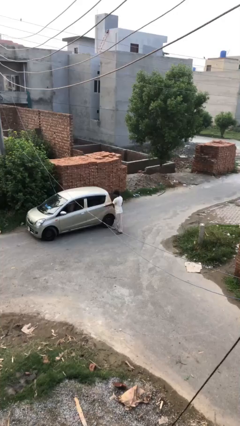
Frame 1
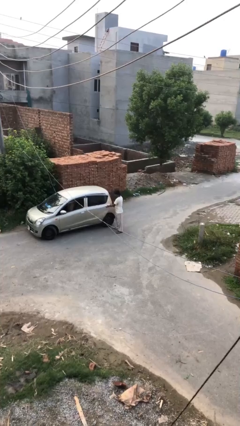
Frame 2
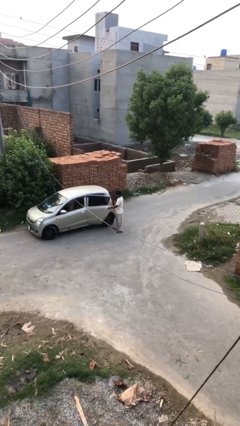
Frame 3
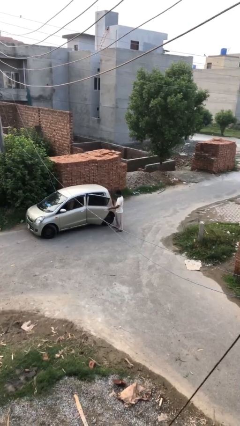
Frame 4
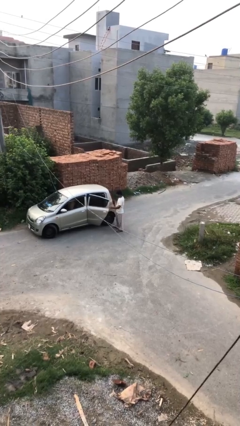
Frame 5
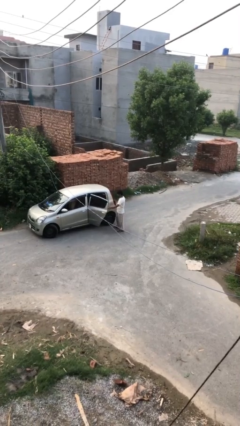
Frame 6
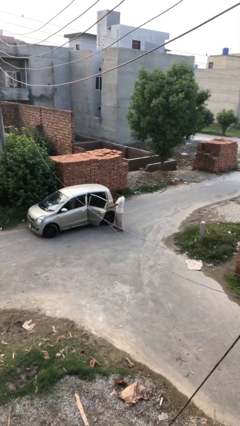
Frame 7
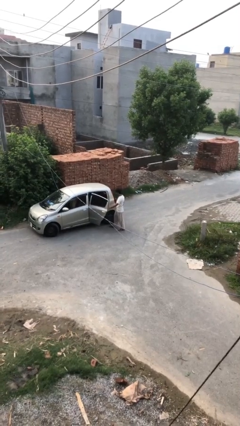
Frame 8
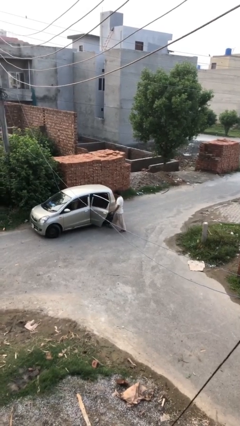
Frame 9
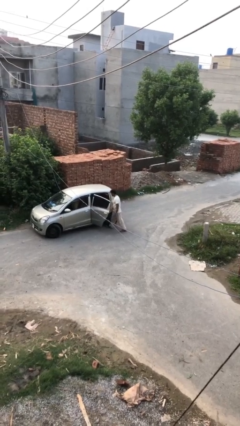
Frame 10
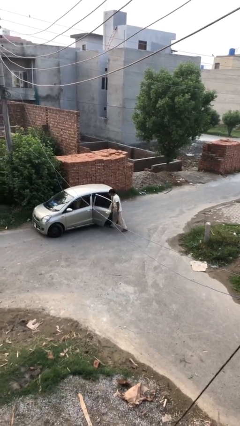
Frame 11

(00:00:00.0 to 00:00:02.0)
person opens car door

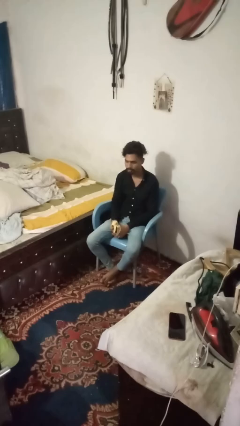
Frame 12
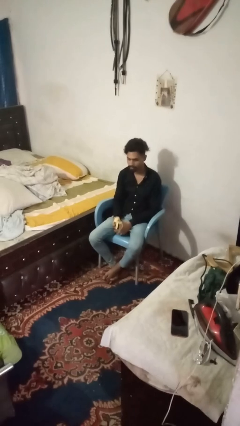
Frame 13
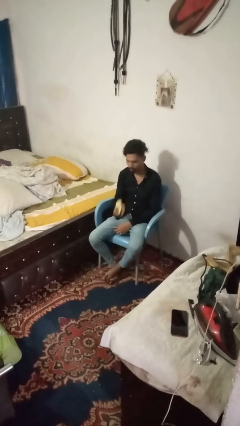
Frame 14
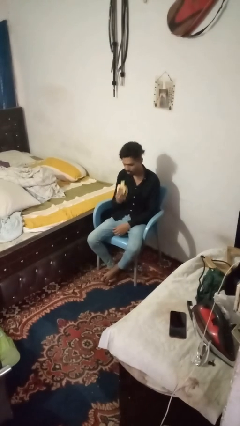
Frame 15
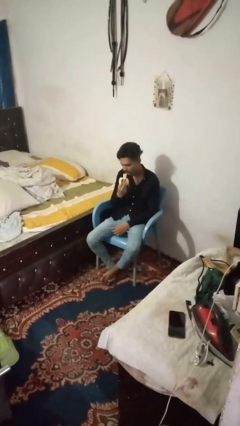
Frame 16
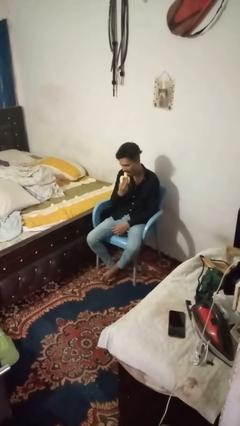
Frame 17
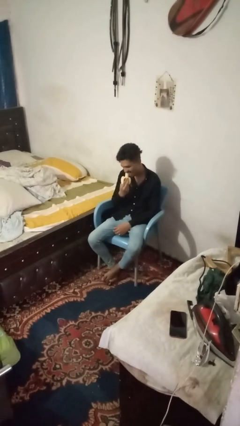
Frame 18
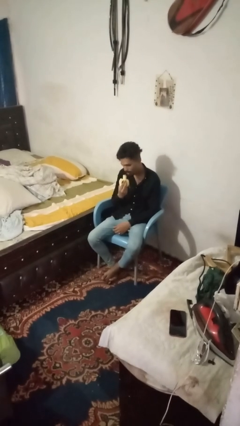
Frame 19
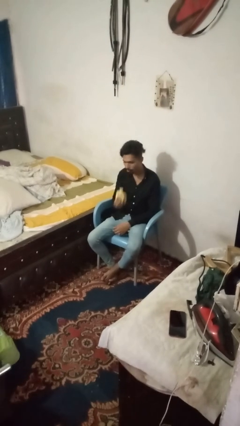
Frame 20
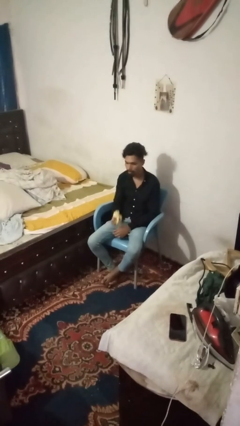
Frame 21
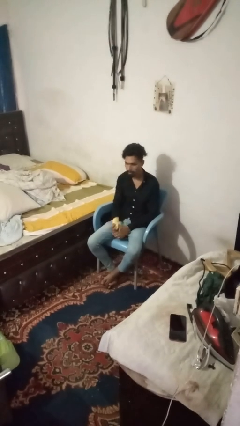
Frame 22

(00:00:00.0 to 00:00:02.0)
person eats banana

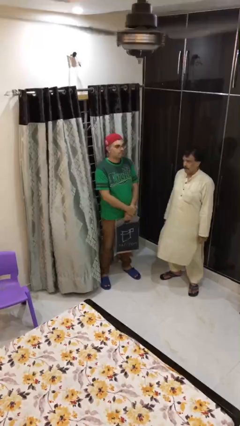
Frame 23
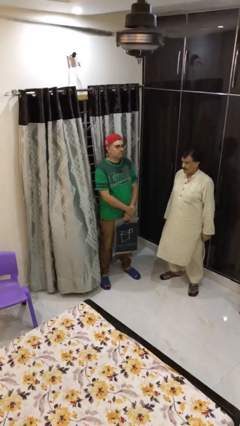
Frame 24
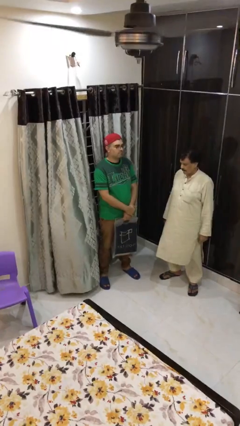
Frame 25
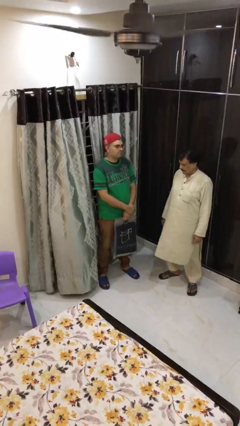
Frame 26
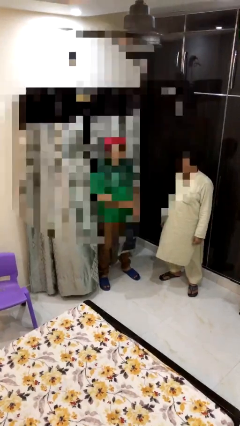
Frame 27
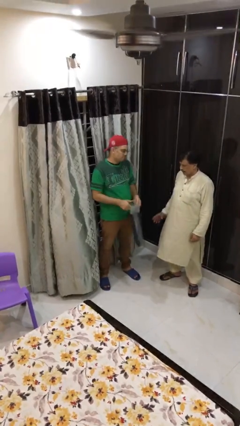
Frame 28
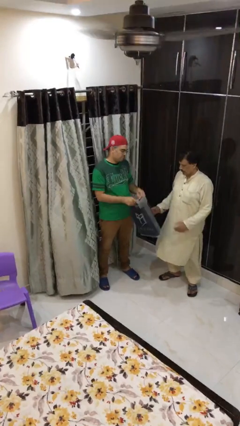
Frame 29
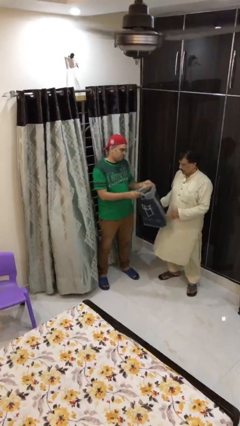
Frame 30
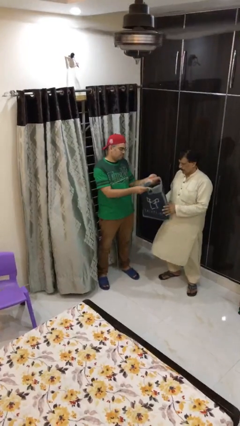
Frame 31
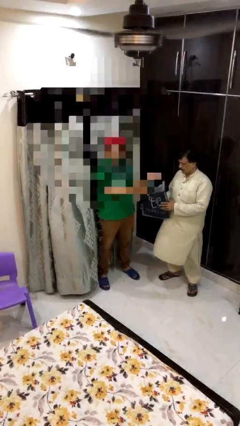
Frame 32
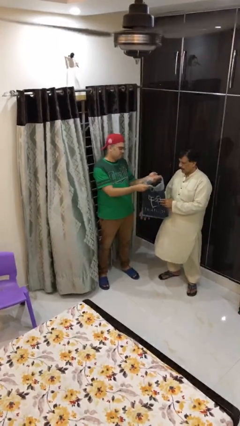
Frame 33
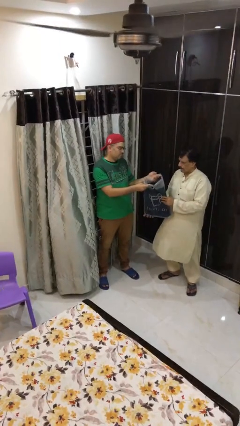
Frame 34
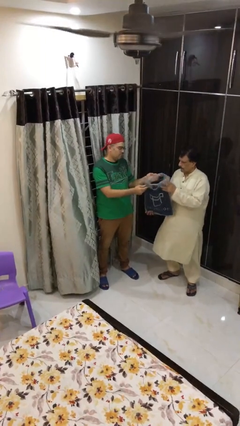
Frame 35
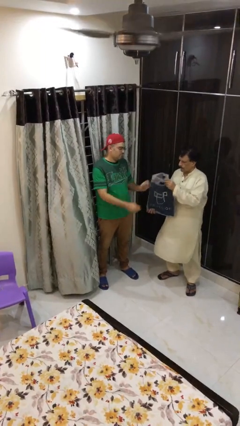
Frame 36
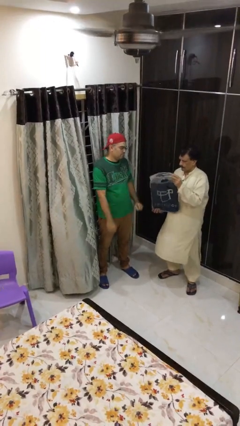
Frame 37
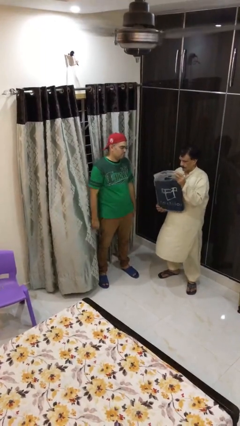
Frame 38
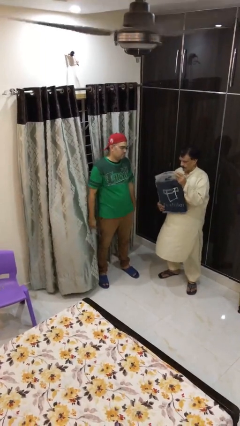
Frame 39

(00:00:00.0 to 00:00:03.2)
person transfers object to person

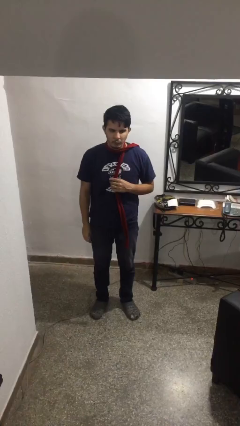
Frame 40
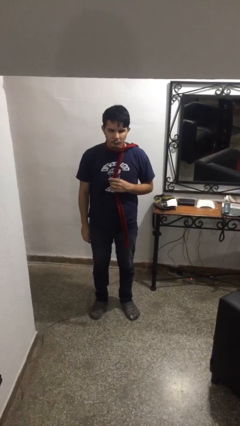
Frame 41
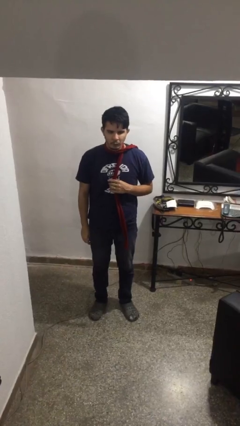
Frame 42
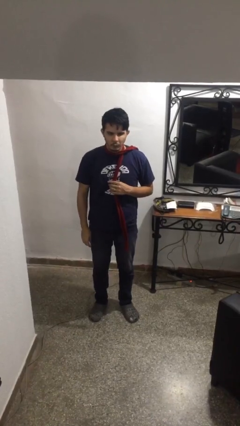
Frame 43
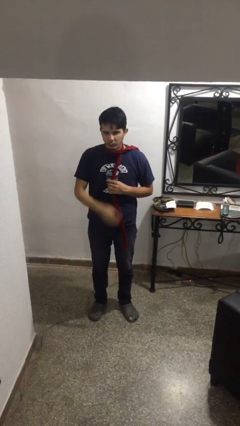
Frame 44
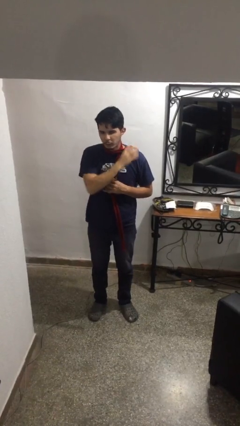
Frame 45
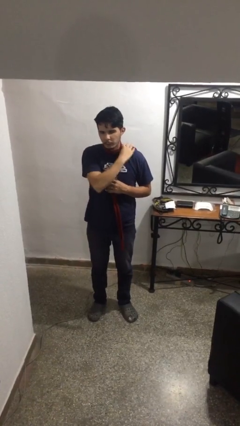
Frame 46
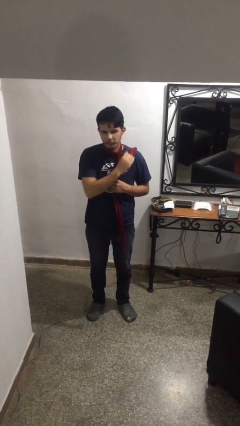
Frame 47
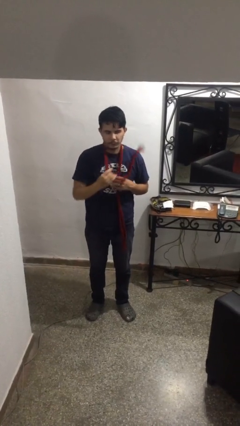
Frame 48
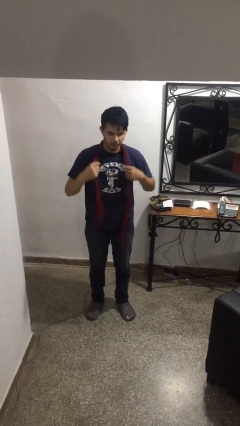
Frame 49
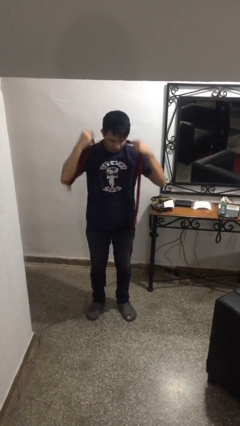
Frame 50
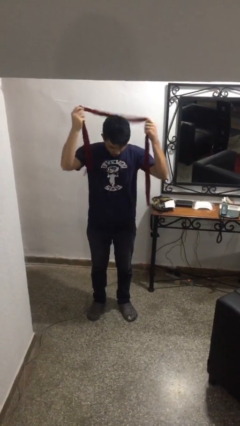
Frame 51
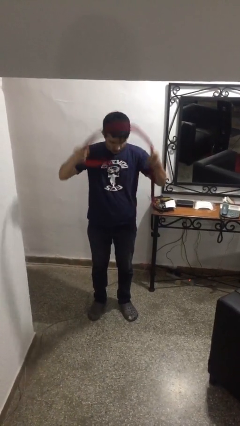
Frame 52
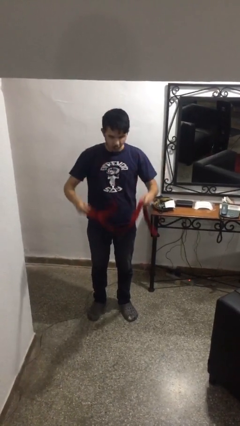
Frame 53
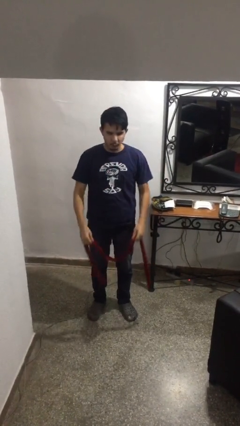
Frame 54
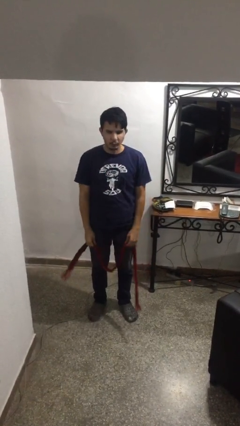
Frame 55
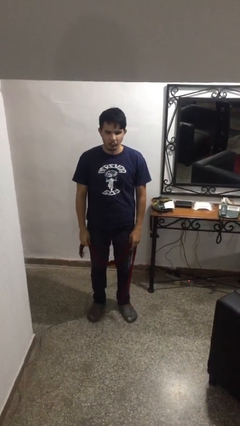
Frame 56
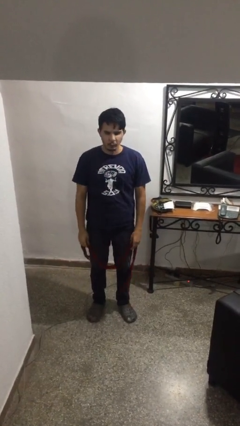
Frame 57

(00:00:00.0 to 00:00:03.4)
person takes off scarf

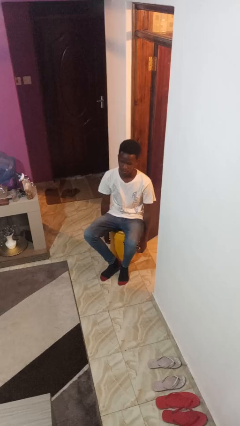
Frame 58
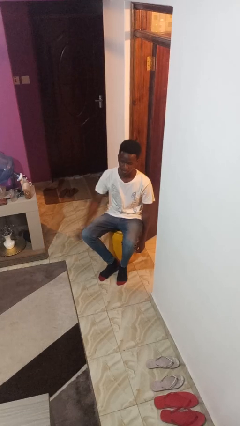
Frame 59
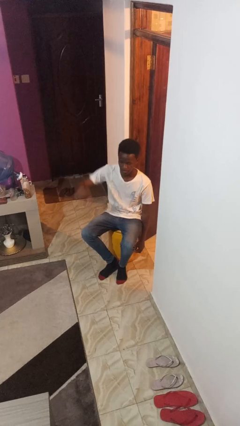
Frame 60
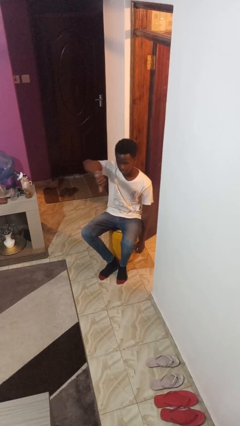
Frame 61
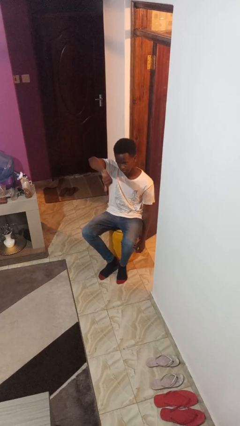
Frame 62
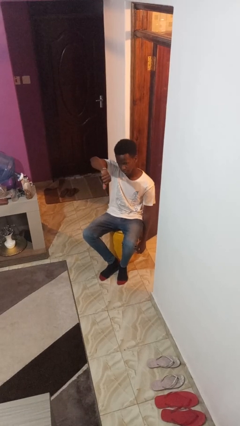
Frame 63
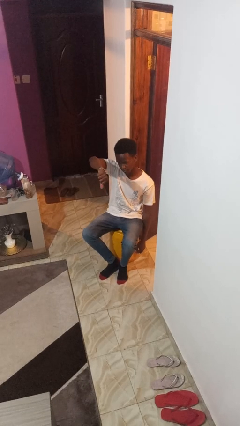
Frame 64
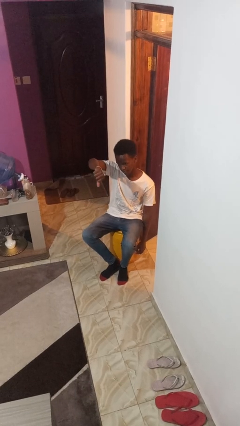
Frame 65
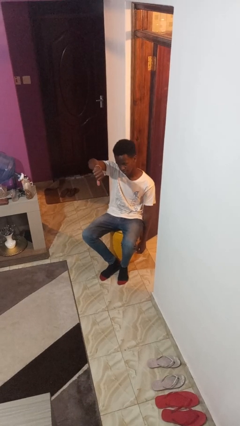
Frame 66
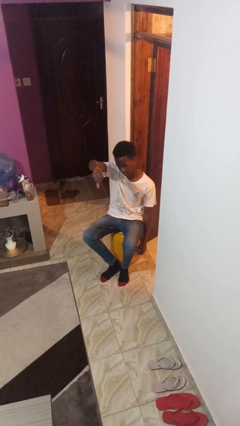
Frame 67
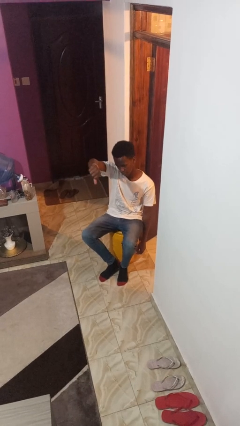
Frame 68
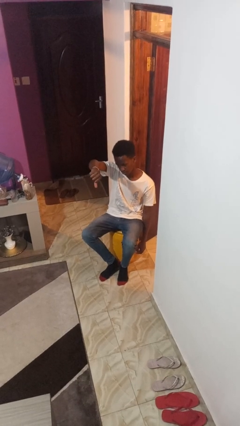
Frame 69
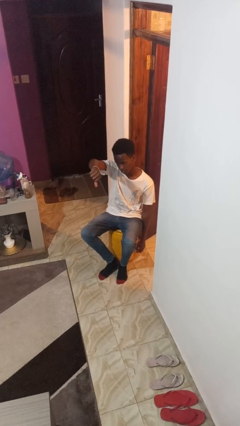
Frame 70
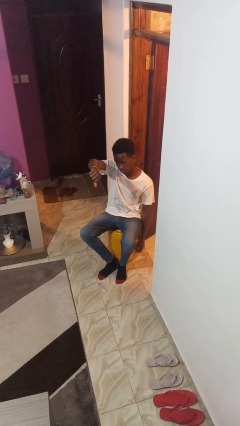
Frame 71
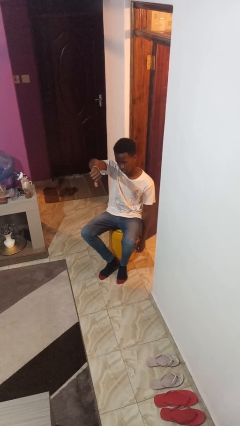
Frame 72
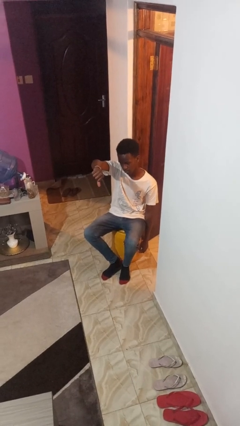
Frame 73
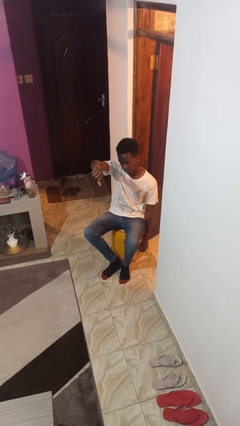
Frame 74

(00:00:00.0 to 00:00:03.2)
person gestures thumbs down

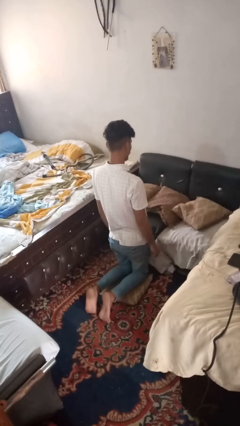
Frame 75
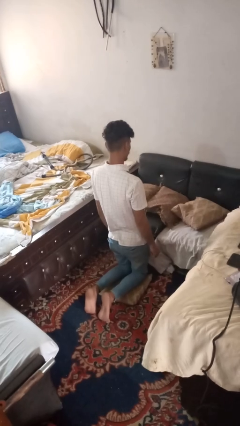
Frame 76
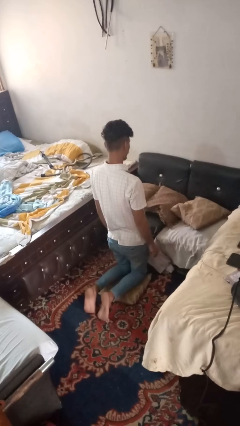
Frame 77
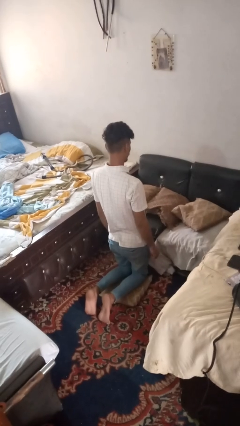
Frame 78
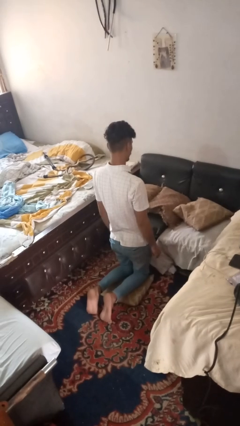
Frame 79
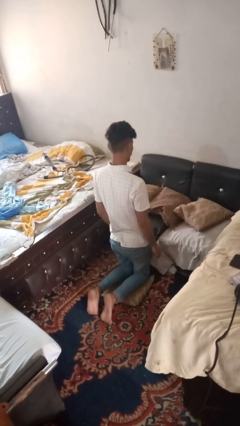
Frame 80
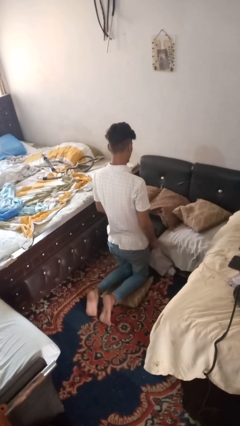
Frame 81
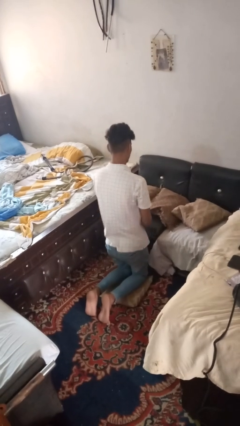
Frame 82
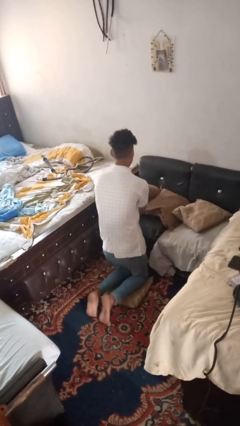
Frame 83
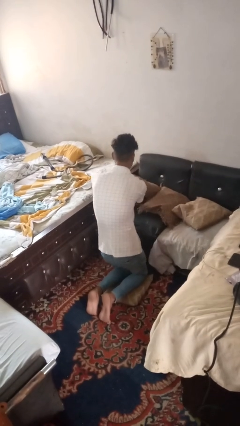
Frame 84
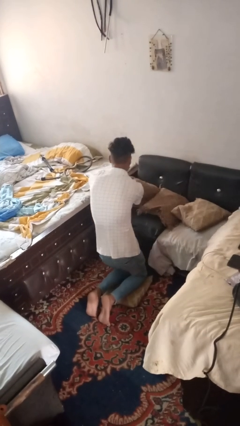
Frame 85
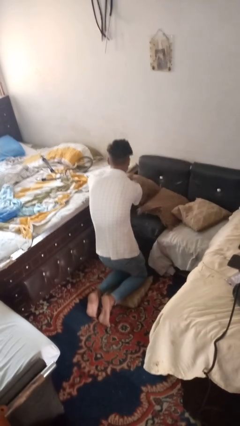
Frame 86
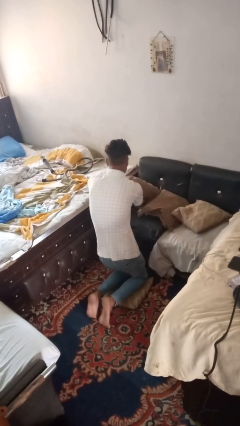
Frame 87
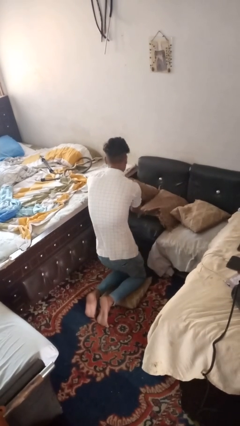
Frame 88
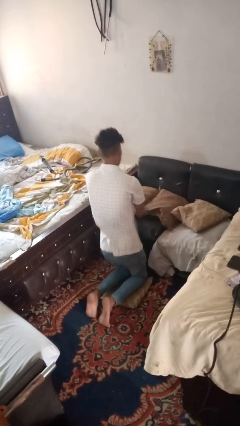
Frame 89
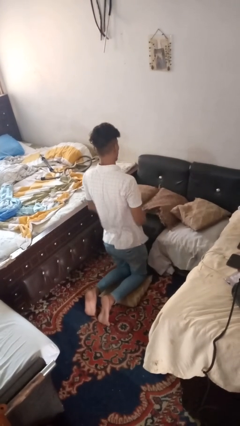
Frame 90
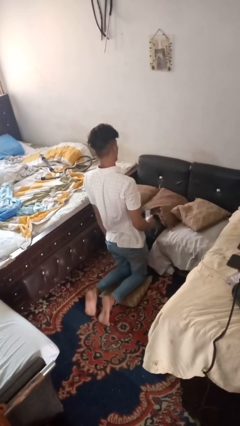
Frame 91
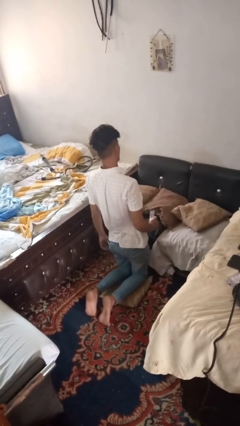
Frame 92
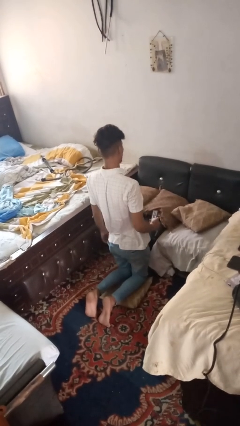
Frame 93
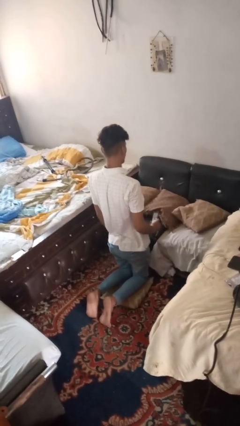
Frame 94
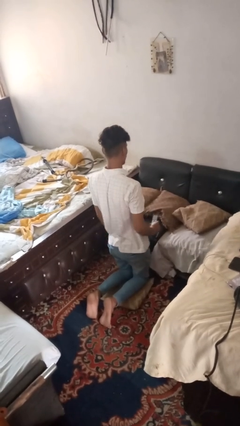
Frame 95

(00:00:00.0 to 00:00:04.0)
person searches in couch
